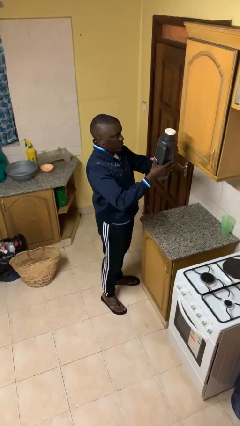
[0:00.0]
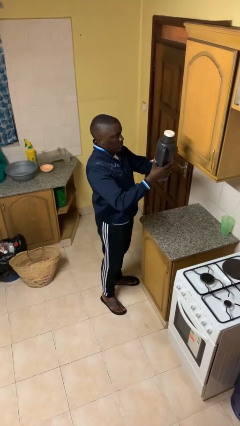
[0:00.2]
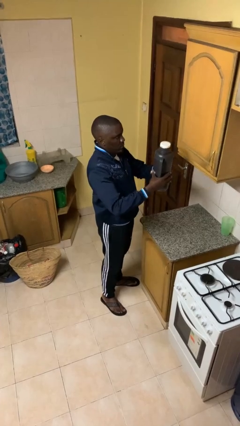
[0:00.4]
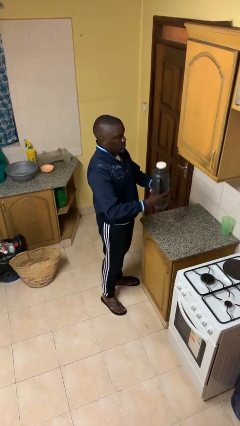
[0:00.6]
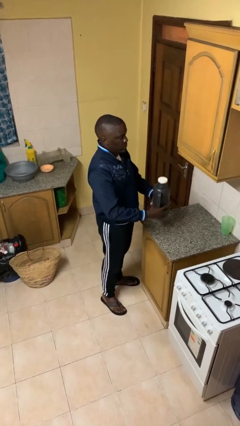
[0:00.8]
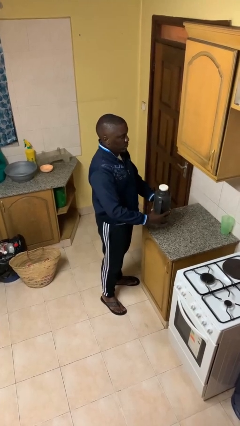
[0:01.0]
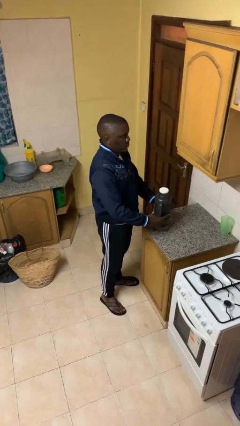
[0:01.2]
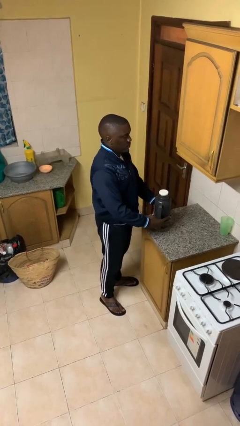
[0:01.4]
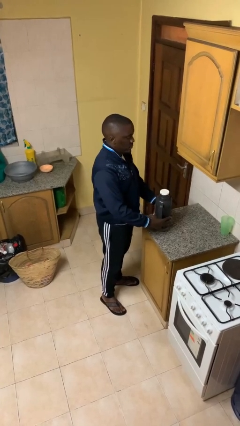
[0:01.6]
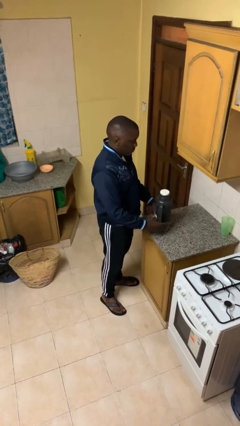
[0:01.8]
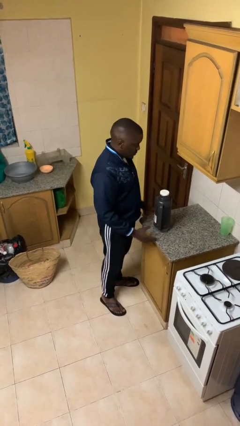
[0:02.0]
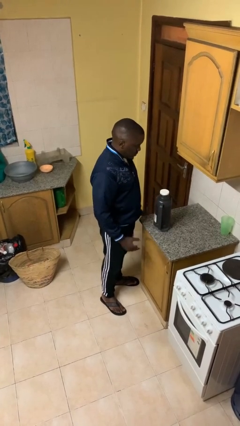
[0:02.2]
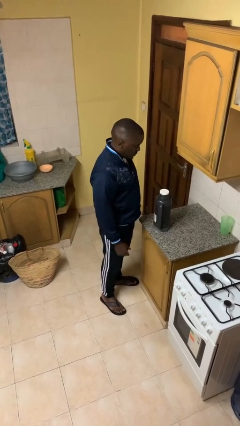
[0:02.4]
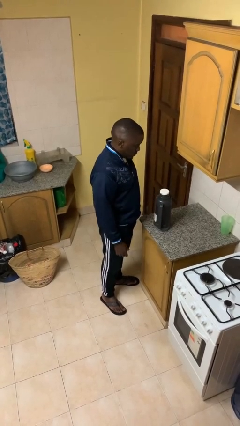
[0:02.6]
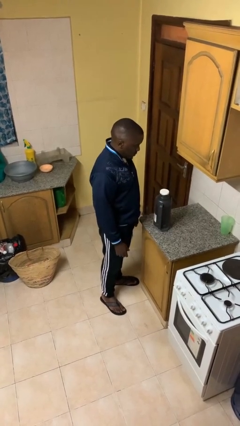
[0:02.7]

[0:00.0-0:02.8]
person puts down object on countertop

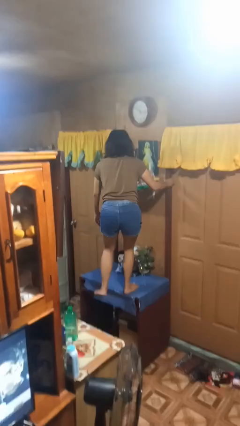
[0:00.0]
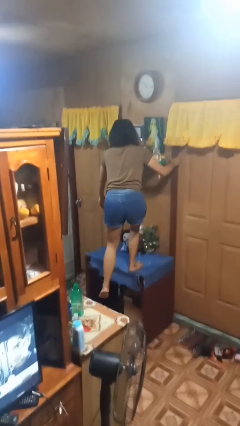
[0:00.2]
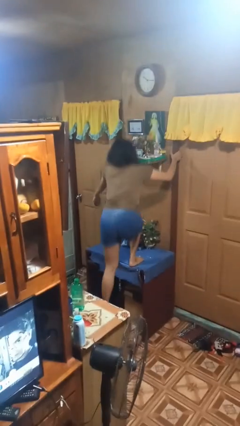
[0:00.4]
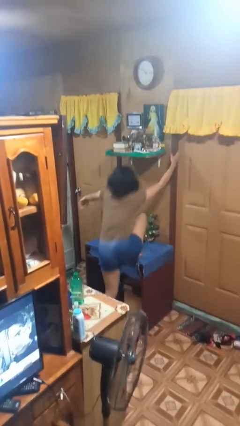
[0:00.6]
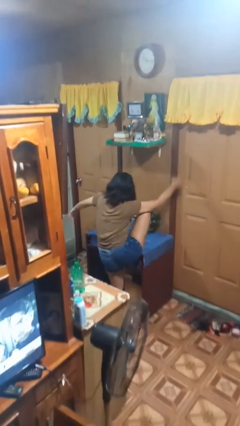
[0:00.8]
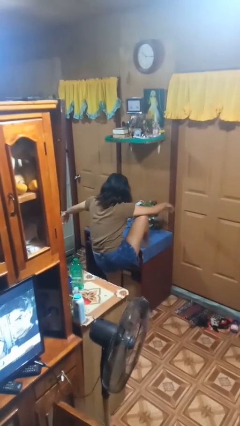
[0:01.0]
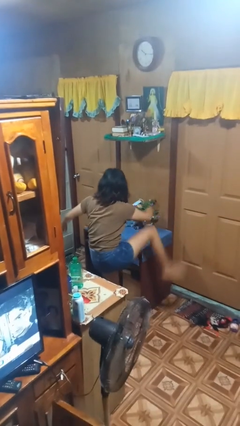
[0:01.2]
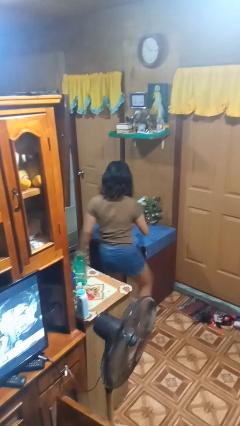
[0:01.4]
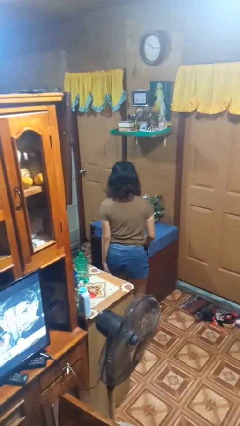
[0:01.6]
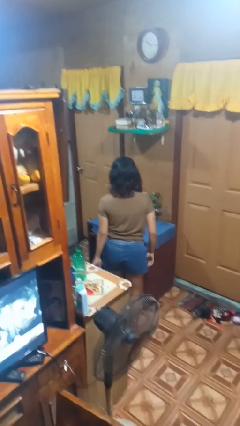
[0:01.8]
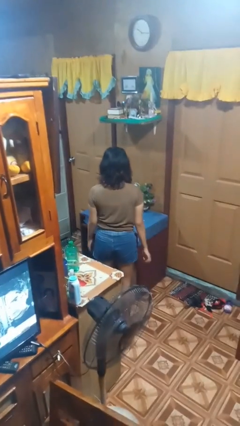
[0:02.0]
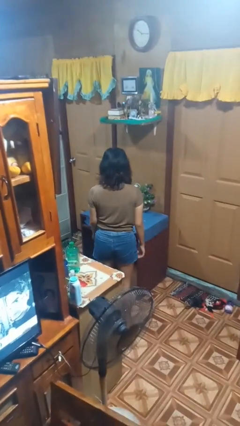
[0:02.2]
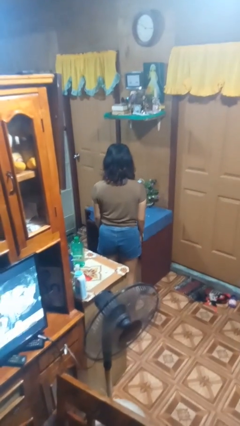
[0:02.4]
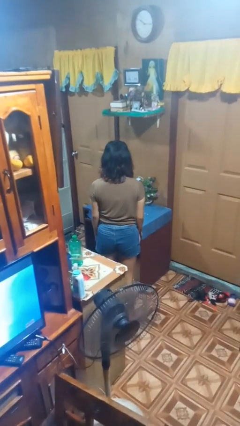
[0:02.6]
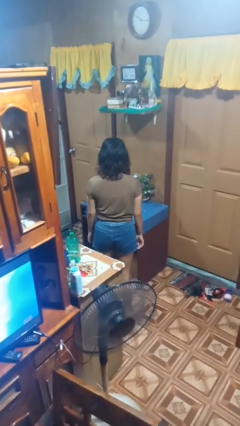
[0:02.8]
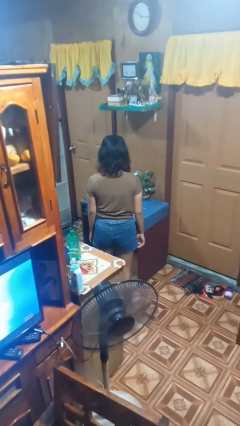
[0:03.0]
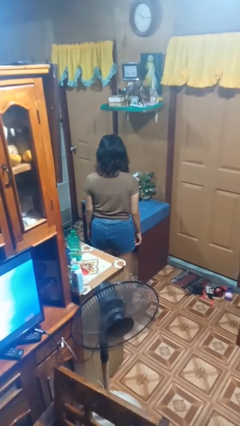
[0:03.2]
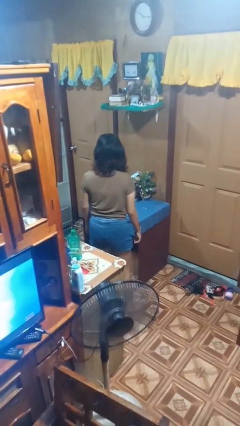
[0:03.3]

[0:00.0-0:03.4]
person climbs off table

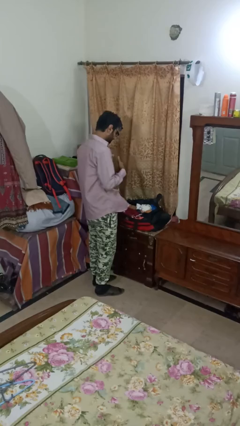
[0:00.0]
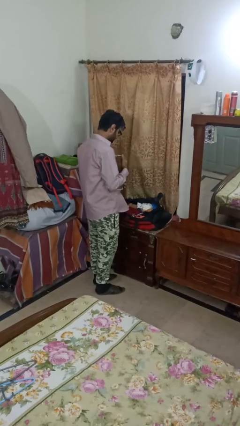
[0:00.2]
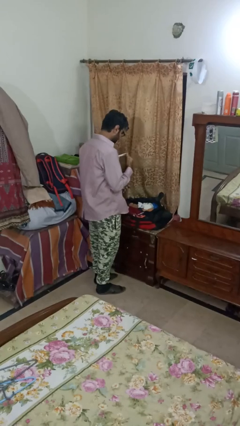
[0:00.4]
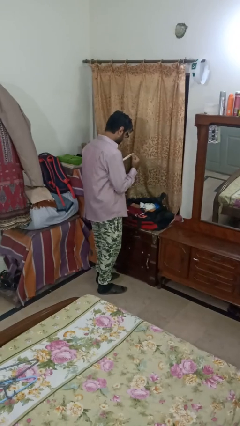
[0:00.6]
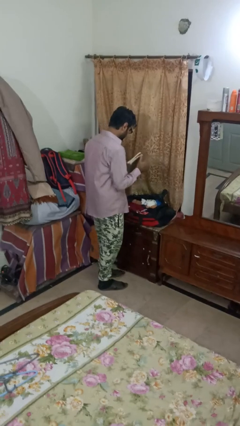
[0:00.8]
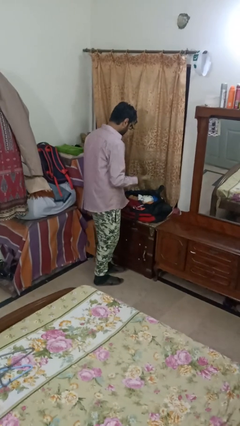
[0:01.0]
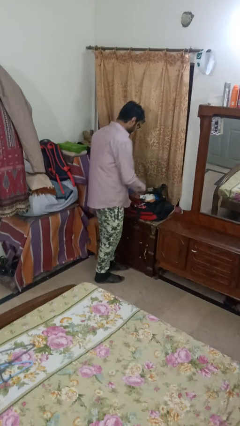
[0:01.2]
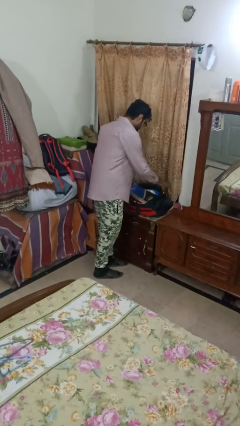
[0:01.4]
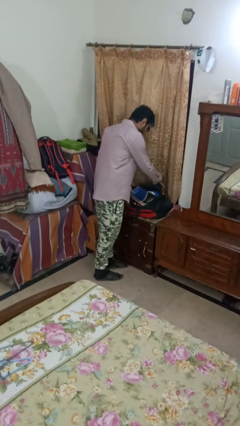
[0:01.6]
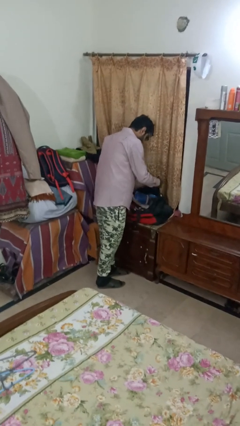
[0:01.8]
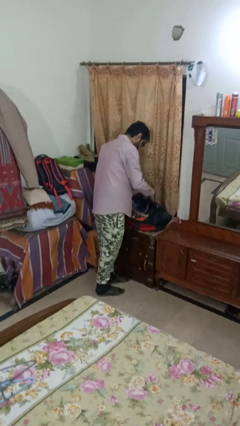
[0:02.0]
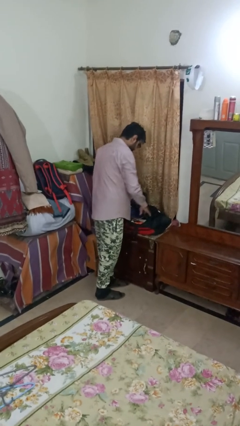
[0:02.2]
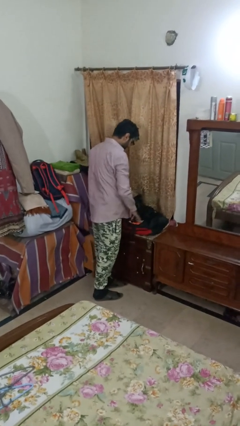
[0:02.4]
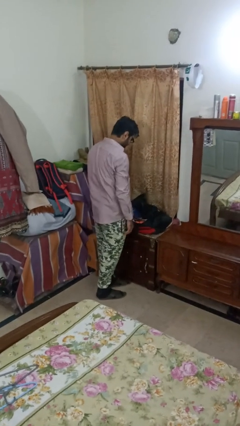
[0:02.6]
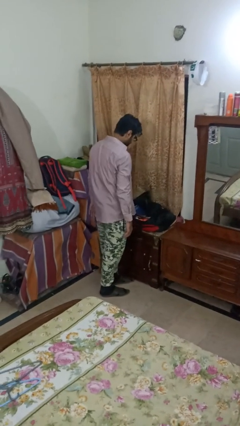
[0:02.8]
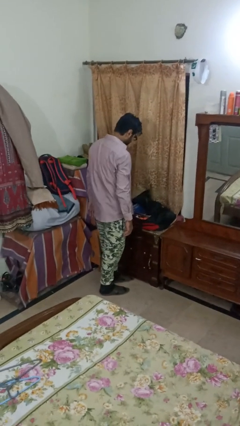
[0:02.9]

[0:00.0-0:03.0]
person puts object into bag

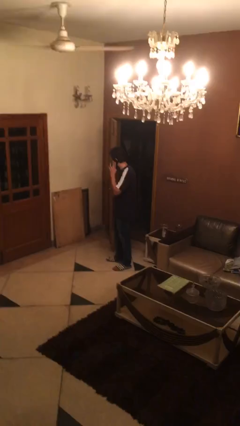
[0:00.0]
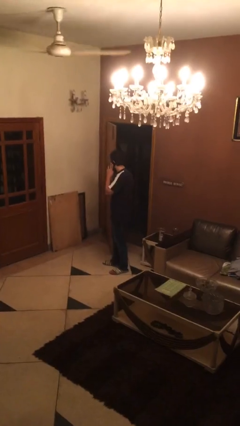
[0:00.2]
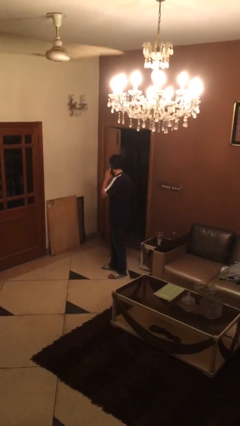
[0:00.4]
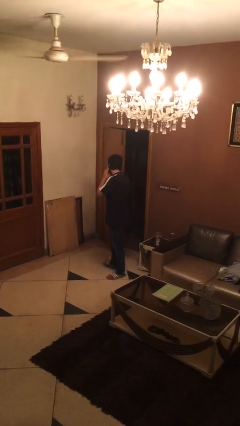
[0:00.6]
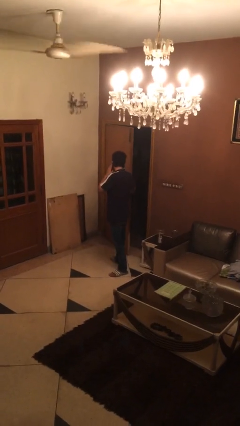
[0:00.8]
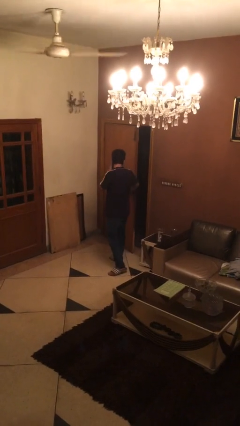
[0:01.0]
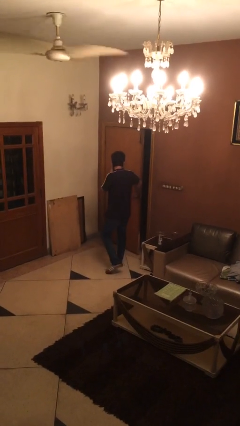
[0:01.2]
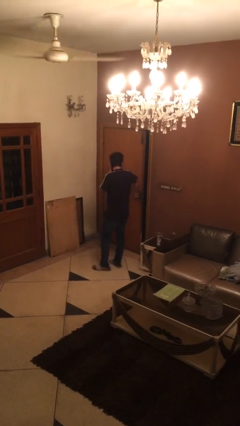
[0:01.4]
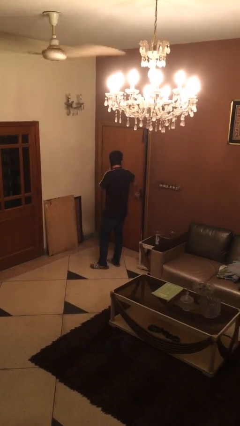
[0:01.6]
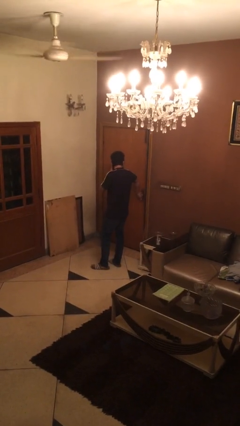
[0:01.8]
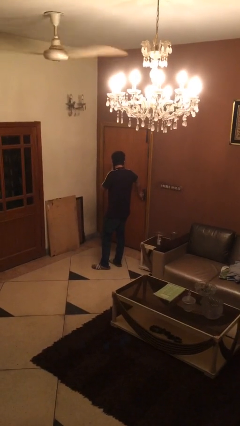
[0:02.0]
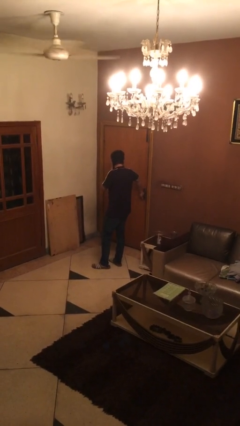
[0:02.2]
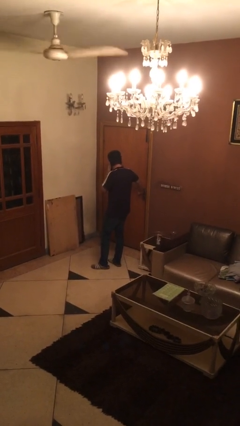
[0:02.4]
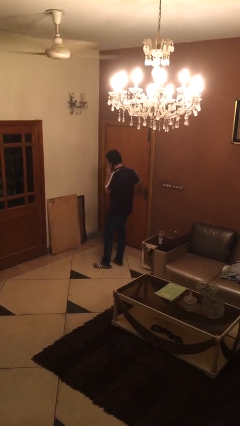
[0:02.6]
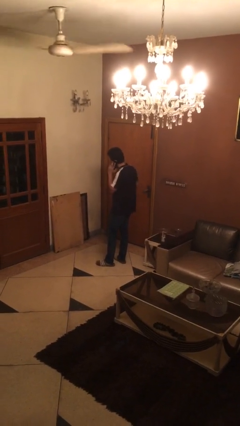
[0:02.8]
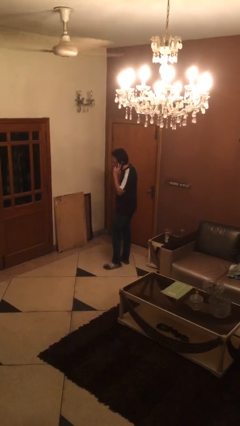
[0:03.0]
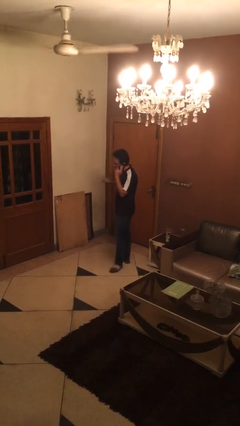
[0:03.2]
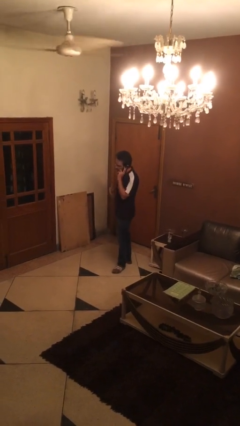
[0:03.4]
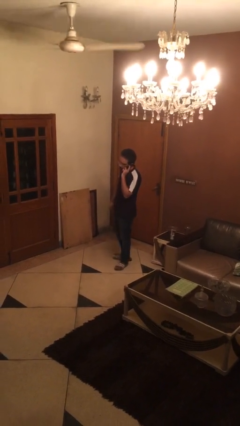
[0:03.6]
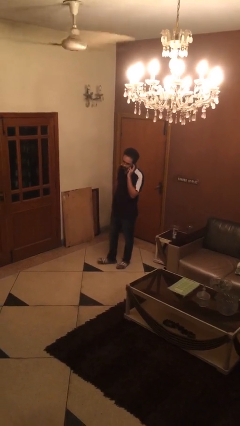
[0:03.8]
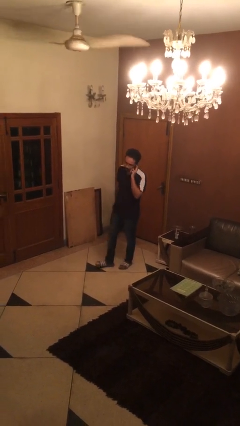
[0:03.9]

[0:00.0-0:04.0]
person closes facility door

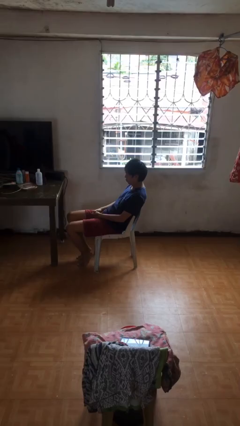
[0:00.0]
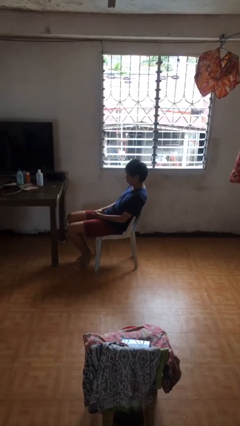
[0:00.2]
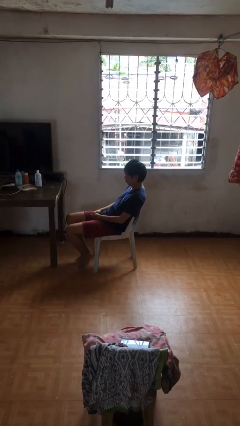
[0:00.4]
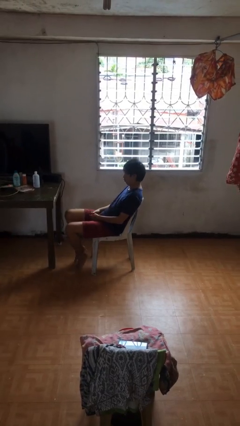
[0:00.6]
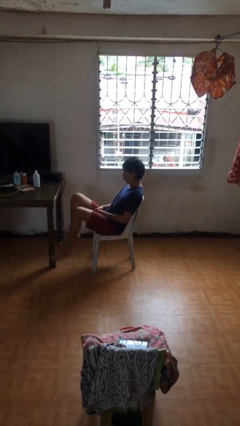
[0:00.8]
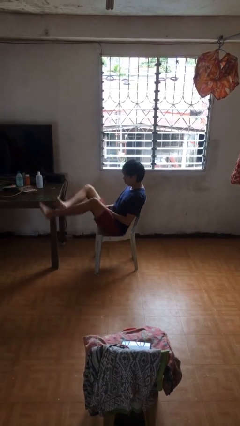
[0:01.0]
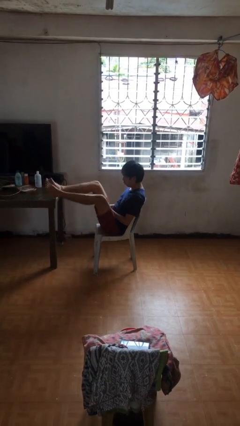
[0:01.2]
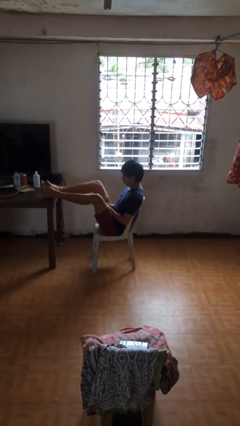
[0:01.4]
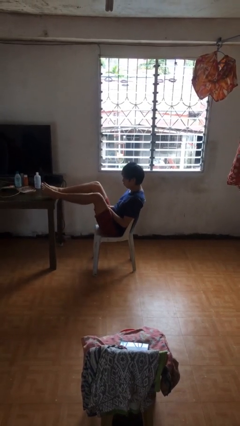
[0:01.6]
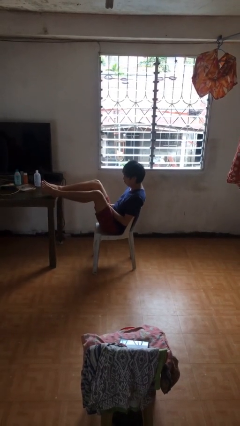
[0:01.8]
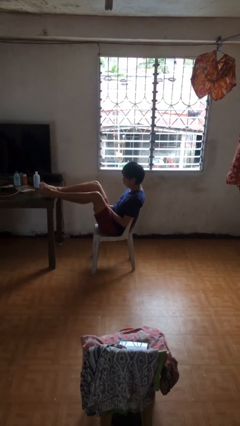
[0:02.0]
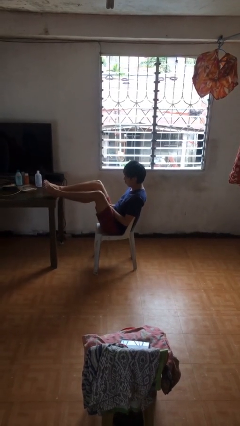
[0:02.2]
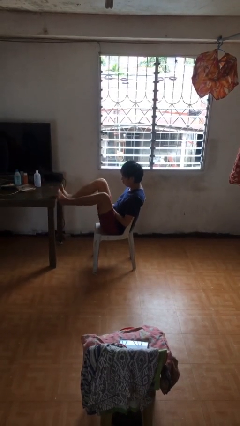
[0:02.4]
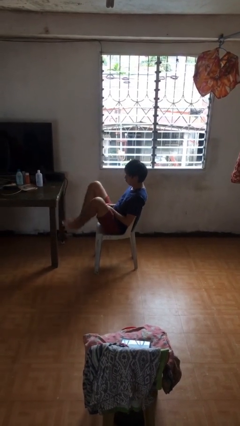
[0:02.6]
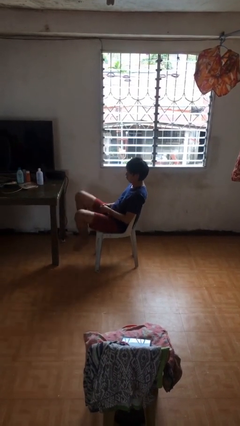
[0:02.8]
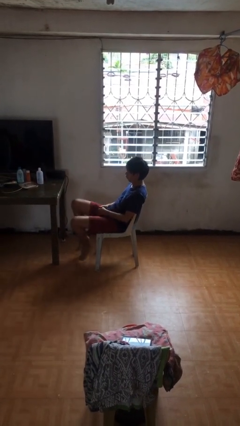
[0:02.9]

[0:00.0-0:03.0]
person puts feet up

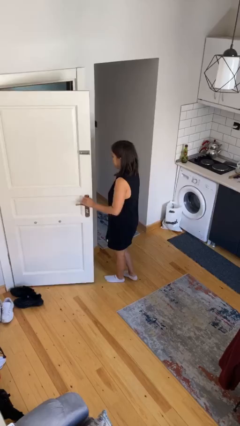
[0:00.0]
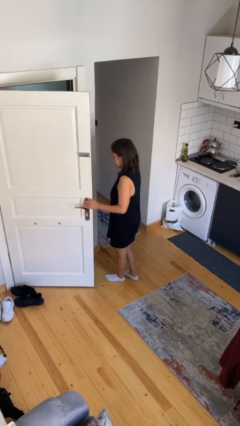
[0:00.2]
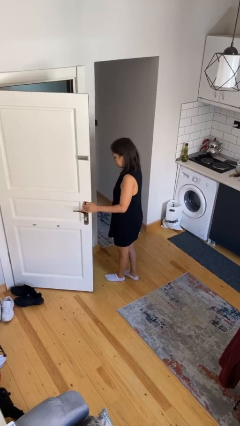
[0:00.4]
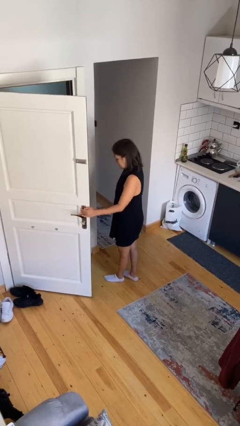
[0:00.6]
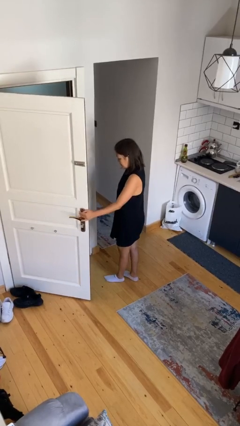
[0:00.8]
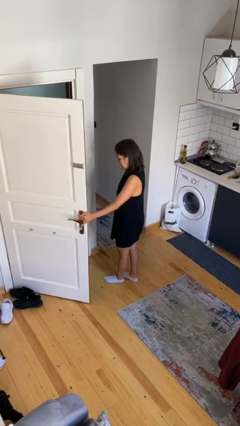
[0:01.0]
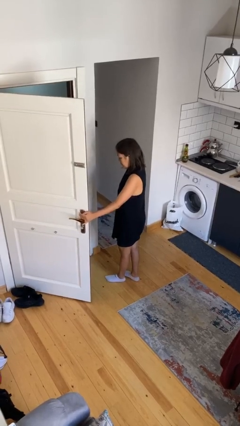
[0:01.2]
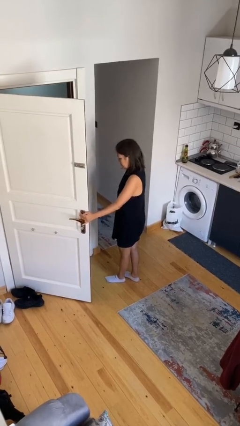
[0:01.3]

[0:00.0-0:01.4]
person opens facility door
